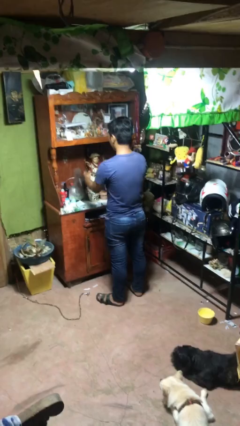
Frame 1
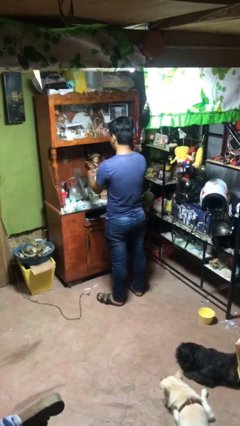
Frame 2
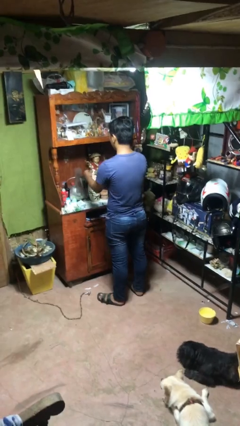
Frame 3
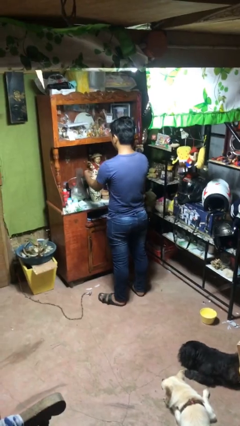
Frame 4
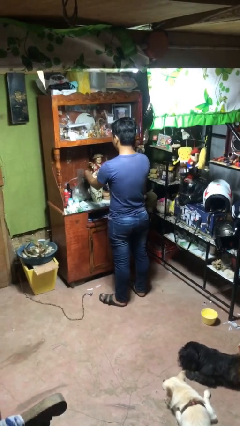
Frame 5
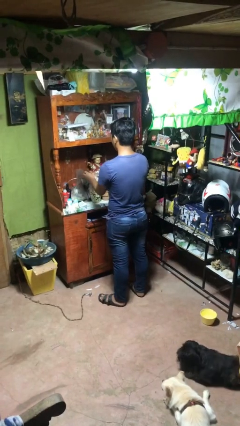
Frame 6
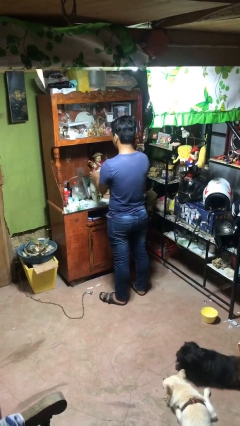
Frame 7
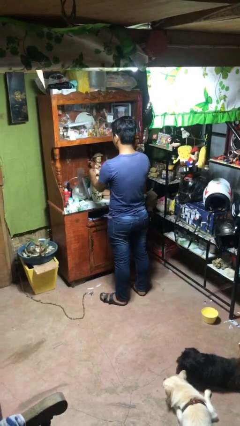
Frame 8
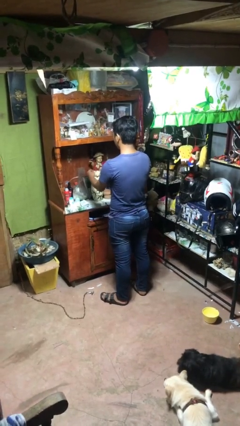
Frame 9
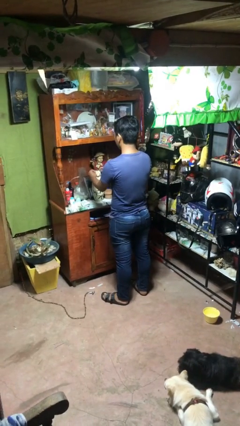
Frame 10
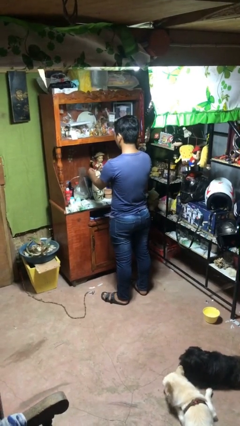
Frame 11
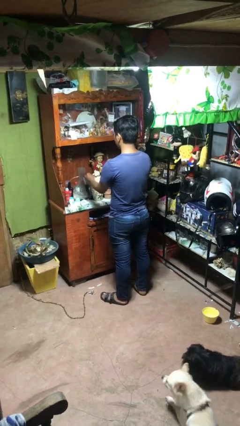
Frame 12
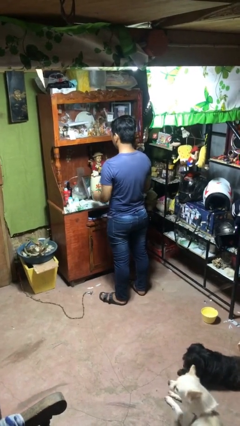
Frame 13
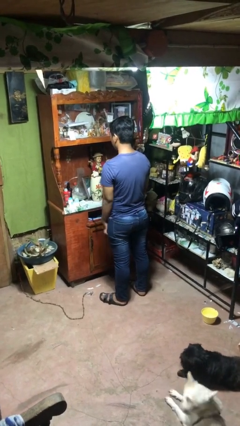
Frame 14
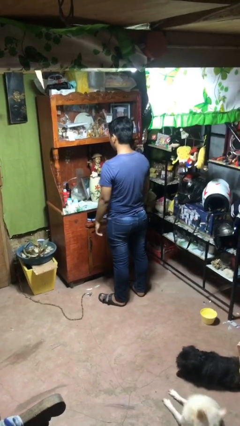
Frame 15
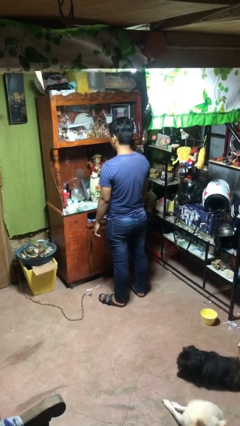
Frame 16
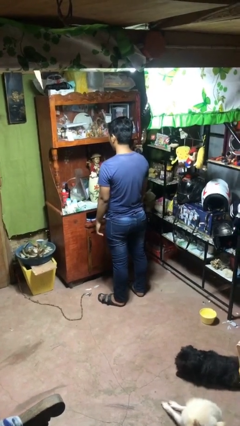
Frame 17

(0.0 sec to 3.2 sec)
person arranges flowers in vase

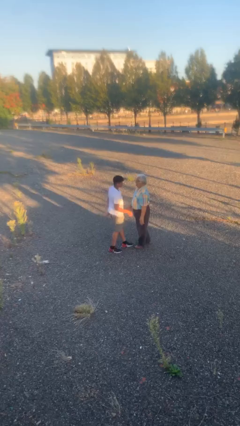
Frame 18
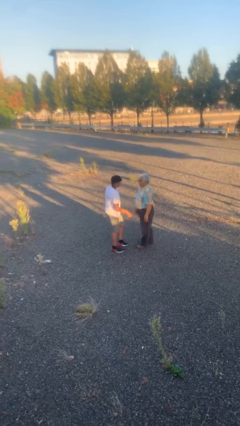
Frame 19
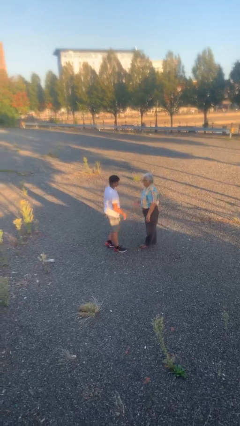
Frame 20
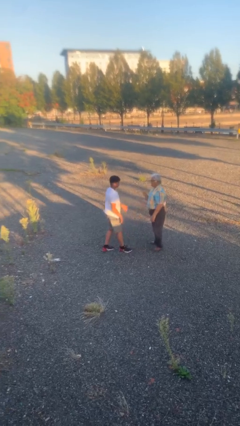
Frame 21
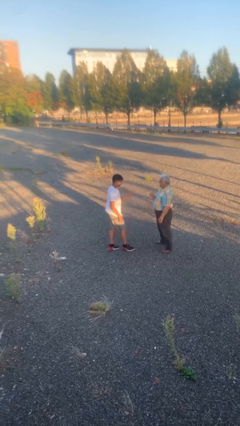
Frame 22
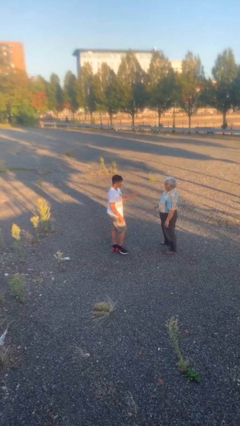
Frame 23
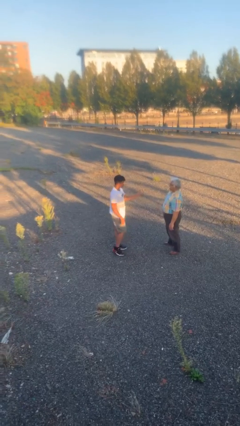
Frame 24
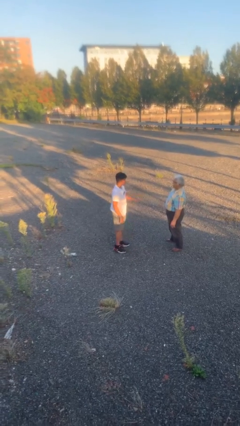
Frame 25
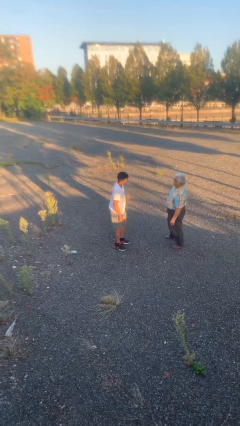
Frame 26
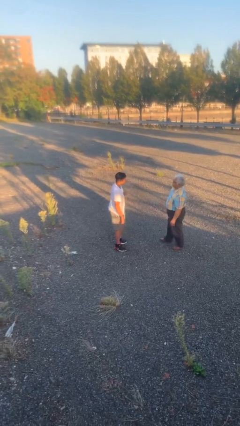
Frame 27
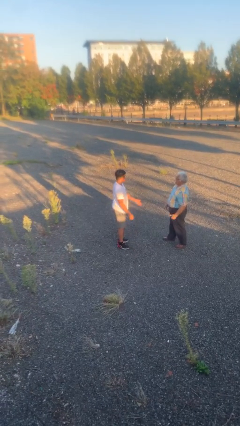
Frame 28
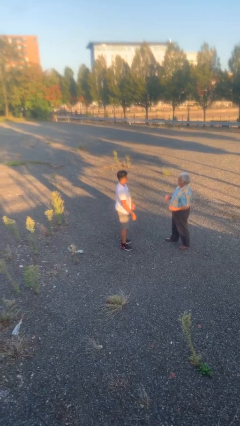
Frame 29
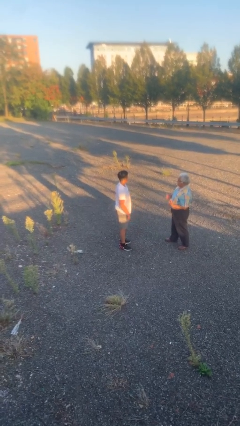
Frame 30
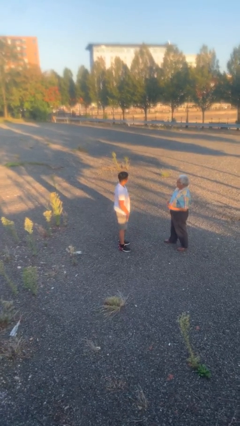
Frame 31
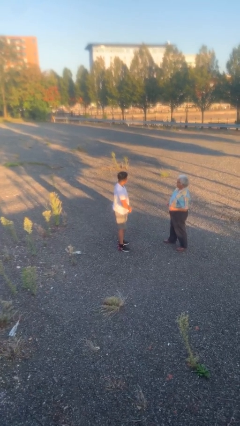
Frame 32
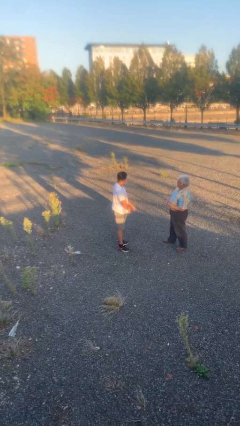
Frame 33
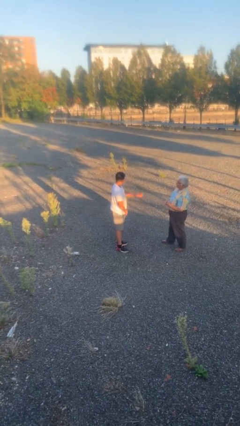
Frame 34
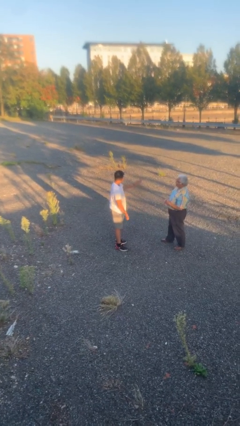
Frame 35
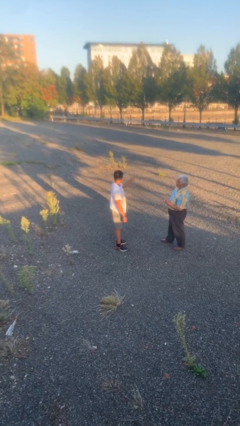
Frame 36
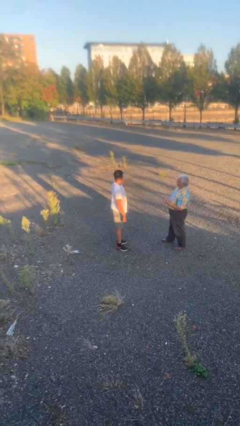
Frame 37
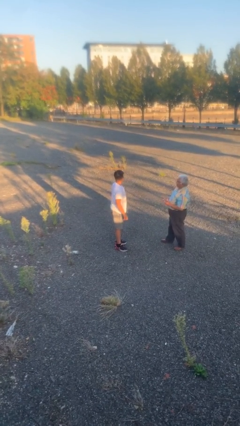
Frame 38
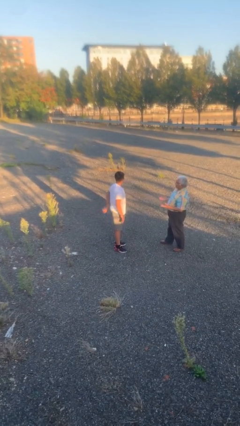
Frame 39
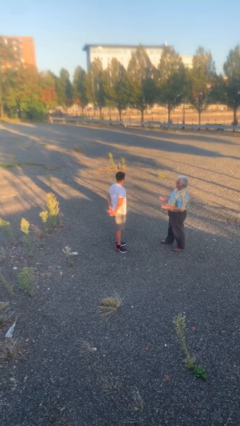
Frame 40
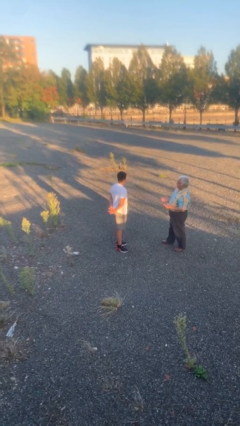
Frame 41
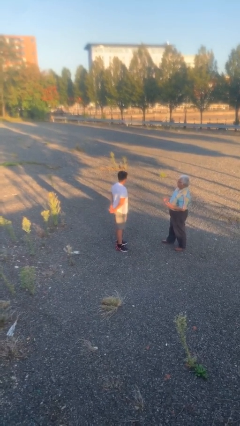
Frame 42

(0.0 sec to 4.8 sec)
person talks to person

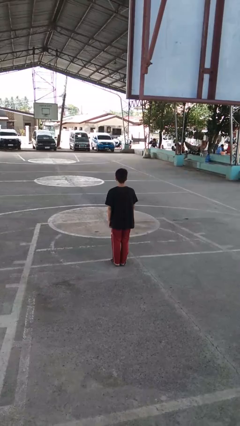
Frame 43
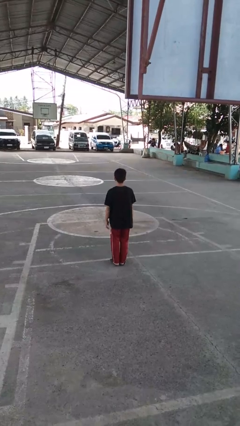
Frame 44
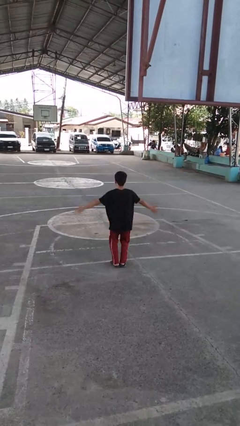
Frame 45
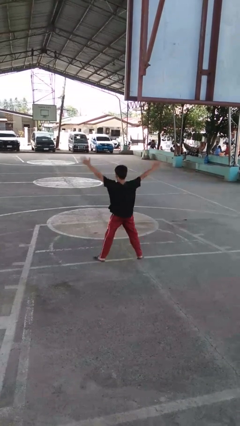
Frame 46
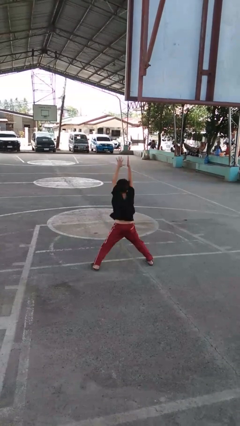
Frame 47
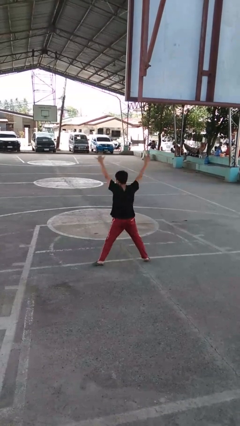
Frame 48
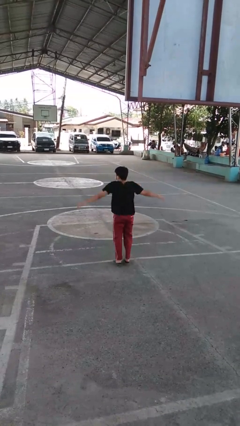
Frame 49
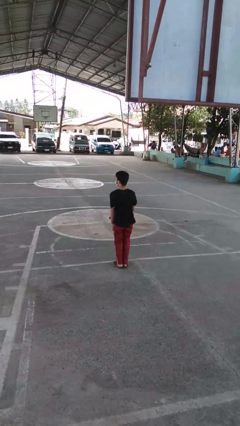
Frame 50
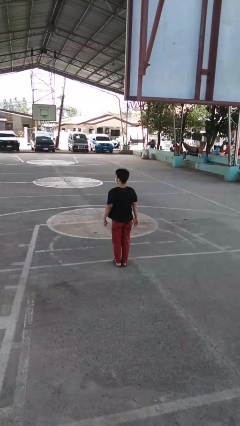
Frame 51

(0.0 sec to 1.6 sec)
person exercises with jumping jacks

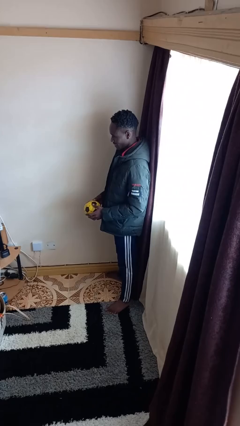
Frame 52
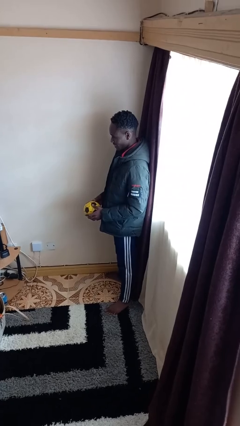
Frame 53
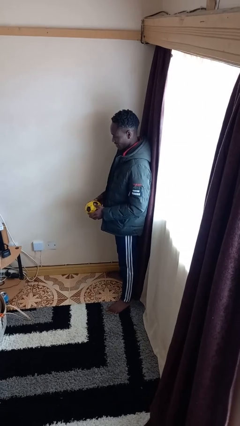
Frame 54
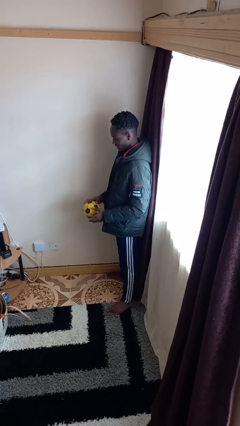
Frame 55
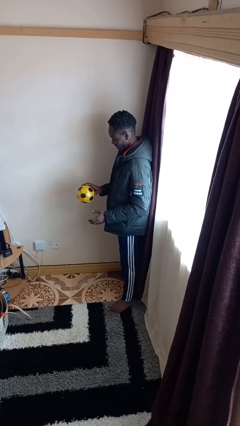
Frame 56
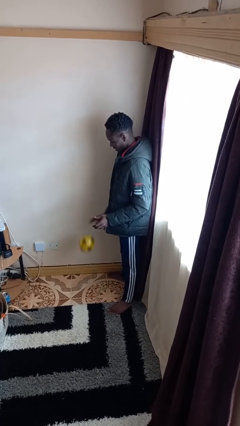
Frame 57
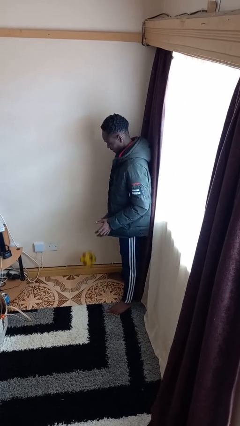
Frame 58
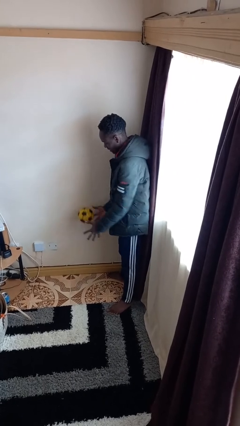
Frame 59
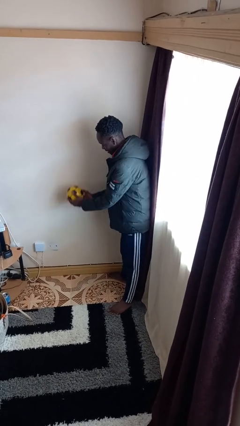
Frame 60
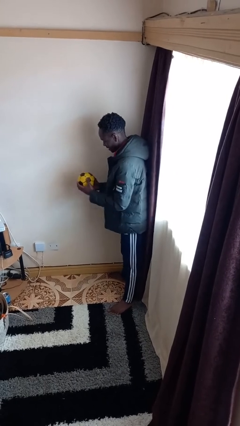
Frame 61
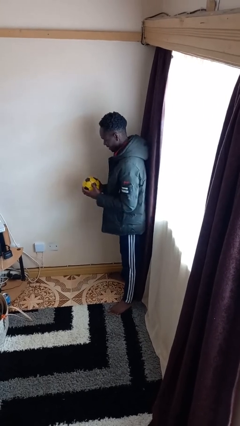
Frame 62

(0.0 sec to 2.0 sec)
person bounces ball on floor

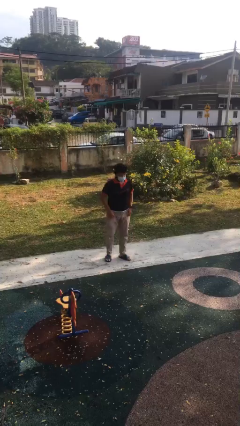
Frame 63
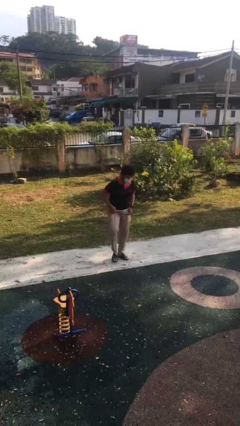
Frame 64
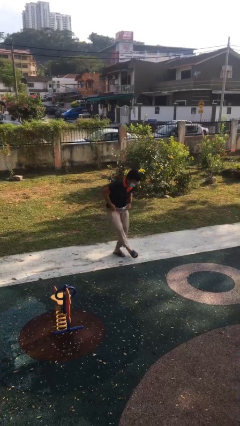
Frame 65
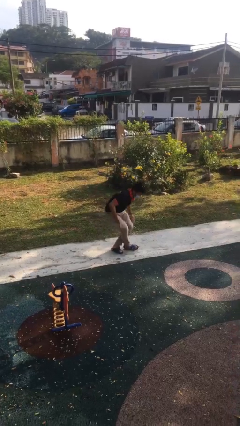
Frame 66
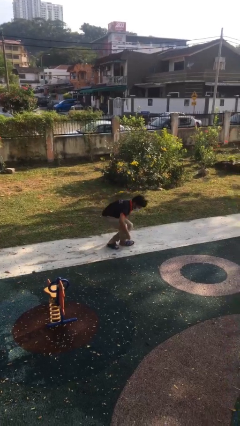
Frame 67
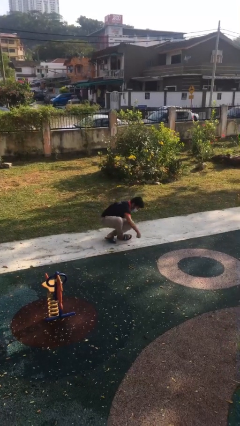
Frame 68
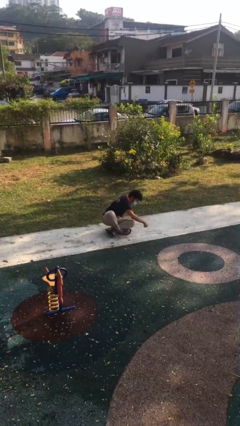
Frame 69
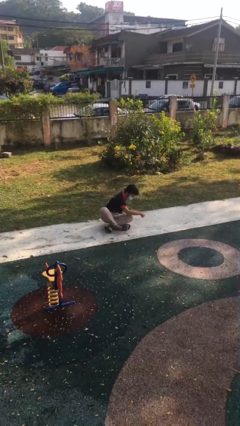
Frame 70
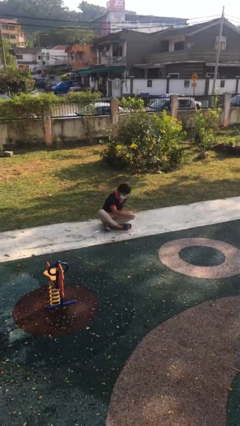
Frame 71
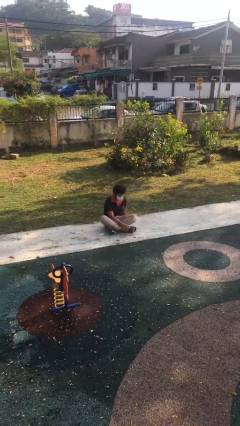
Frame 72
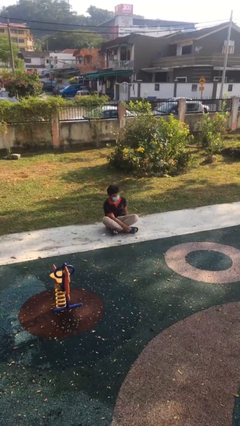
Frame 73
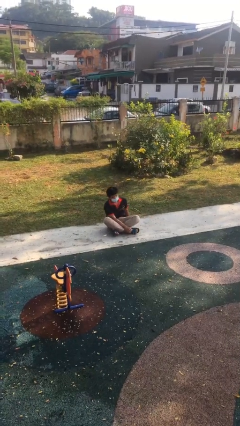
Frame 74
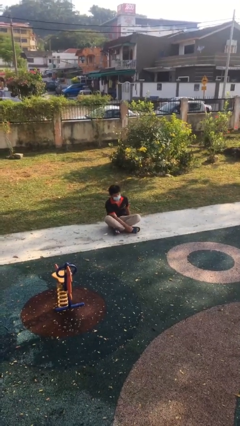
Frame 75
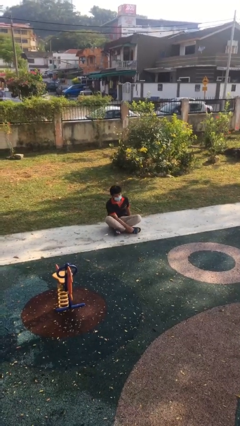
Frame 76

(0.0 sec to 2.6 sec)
person sits crisscross

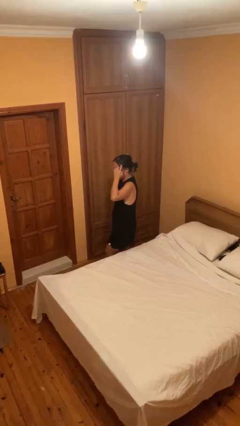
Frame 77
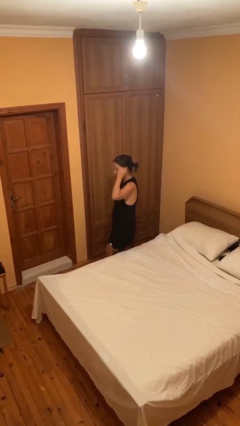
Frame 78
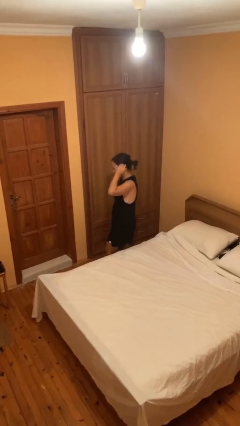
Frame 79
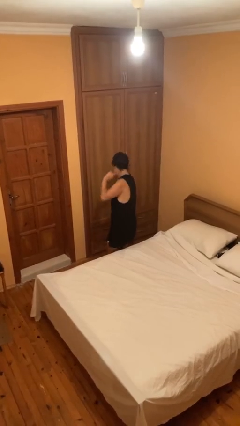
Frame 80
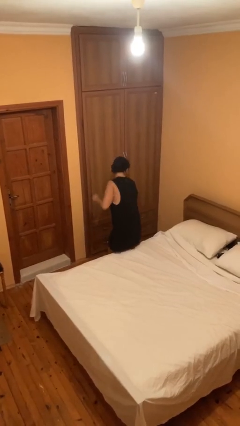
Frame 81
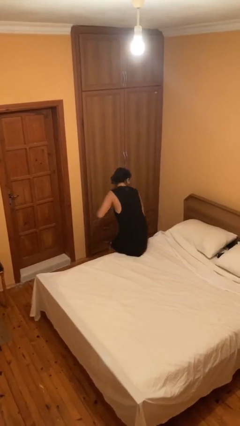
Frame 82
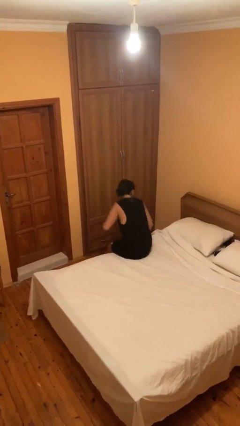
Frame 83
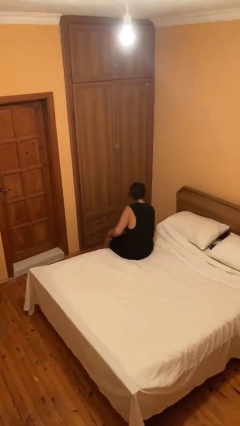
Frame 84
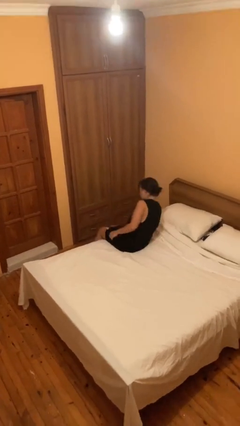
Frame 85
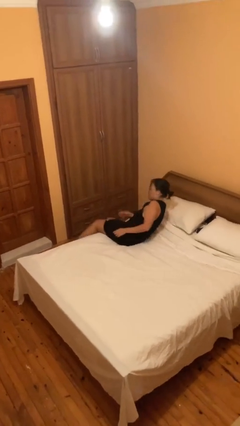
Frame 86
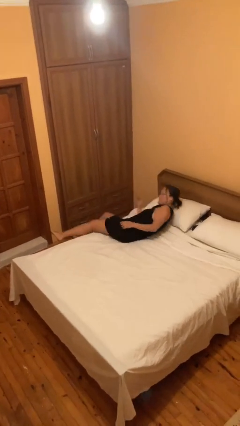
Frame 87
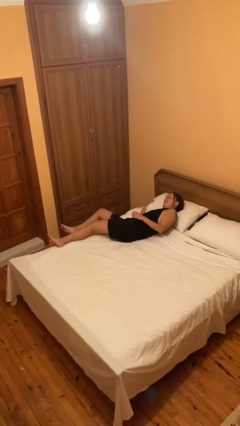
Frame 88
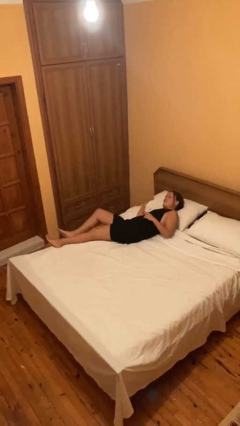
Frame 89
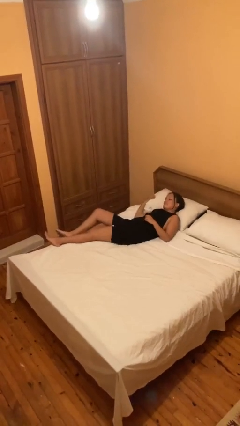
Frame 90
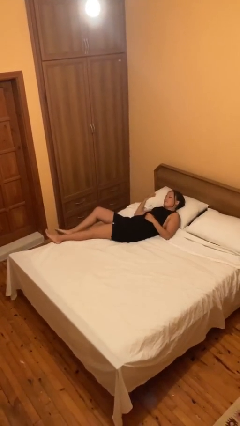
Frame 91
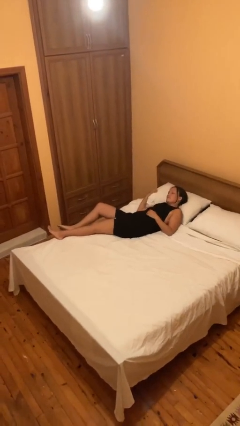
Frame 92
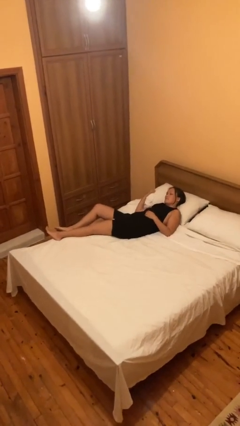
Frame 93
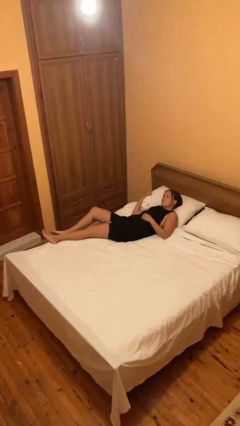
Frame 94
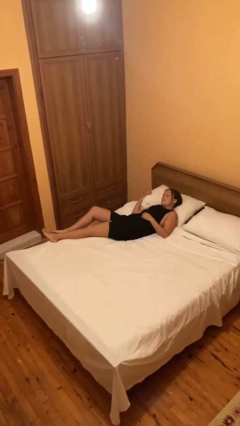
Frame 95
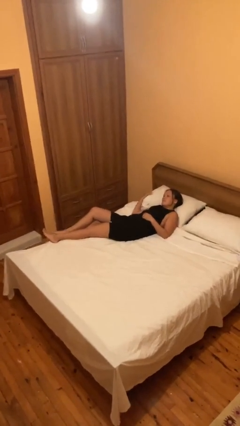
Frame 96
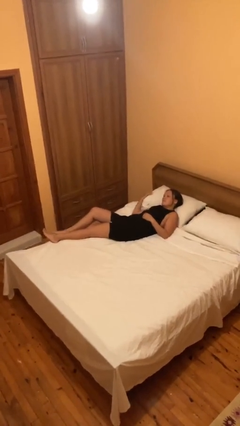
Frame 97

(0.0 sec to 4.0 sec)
person lies down on bed
